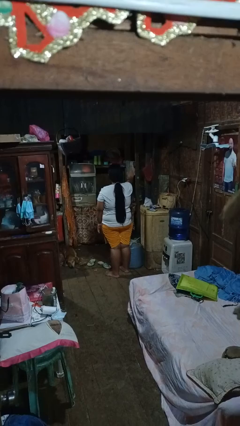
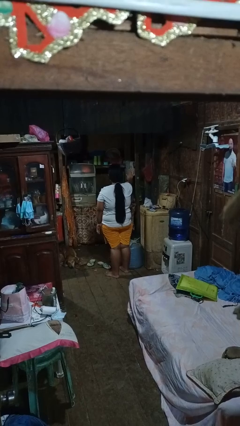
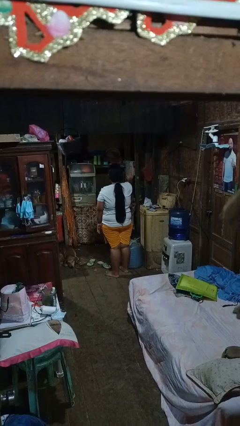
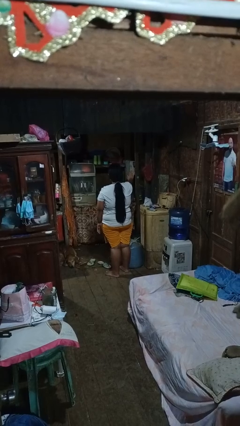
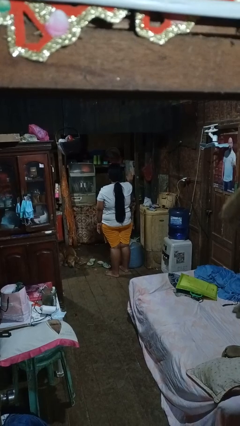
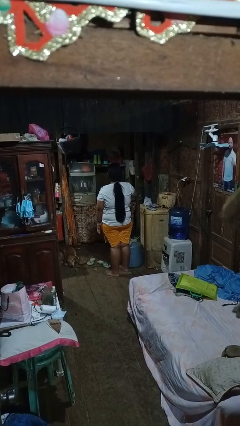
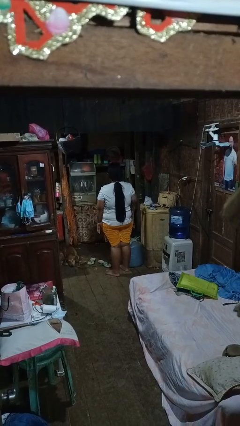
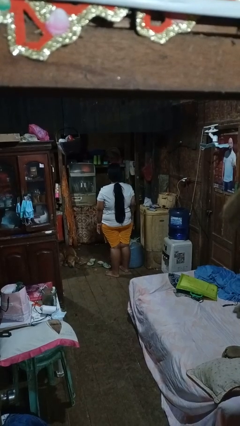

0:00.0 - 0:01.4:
person gestures stop

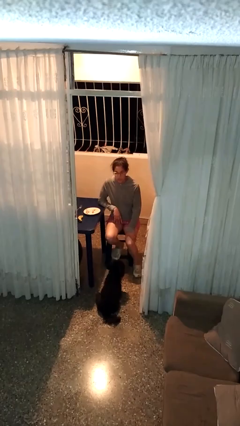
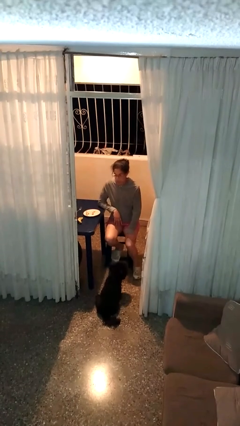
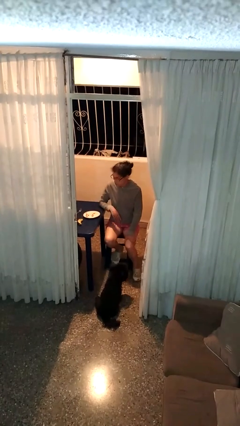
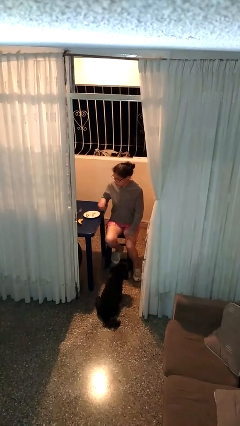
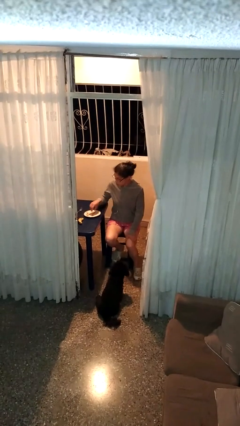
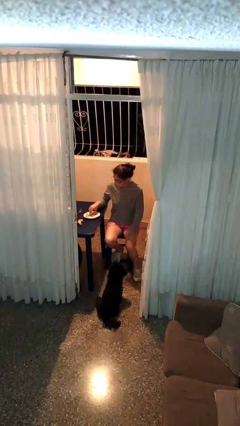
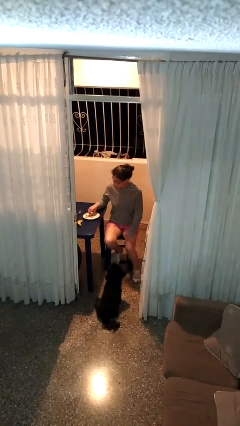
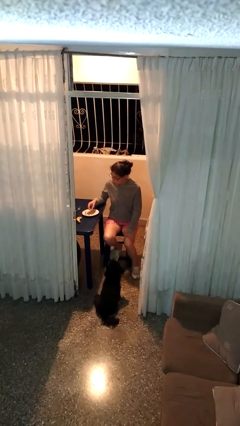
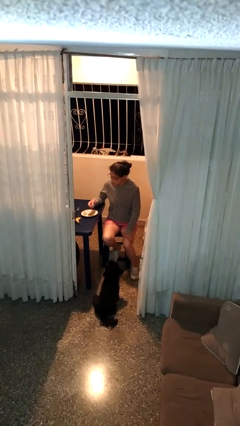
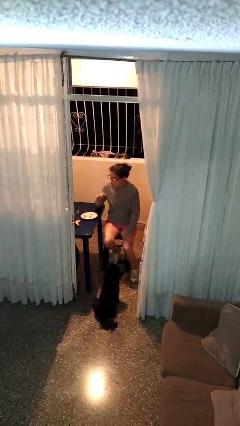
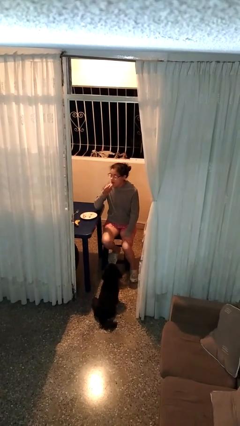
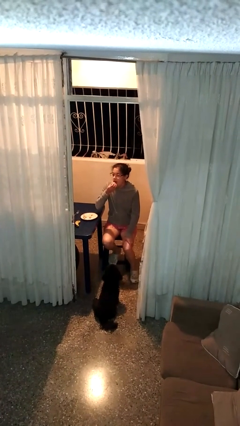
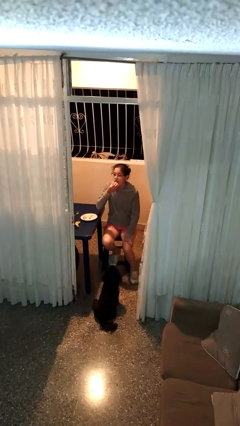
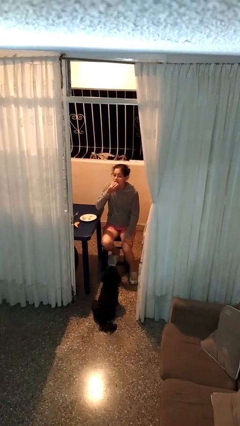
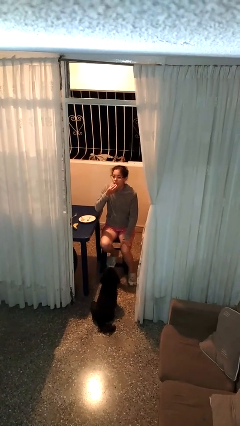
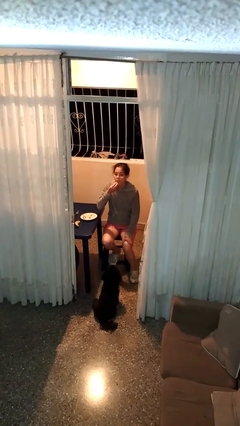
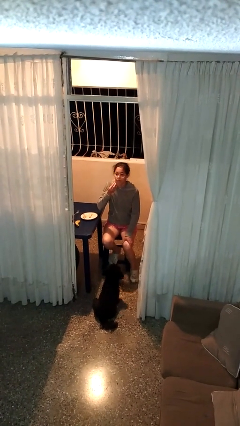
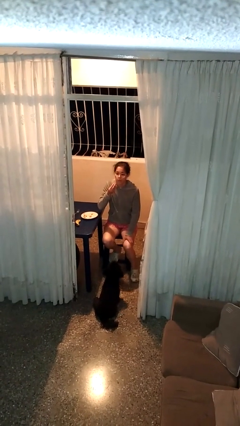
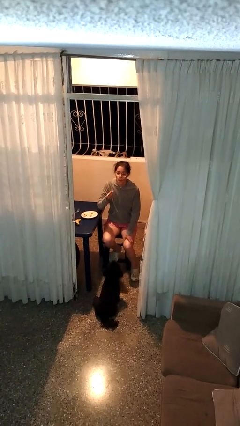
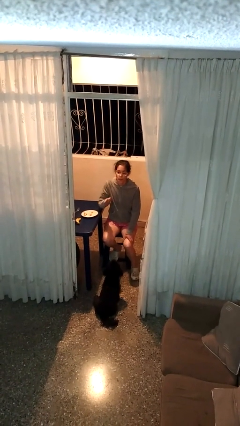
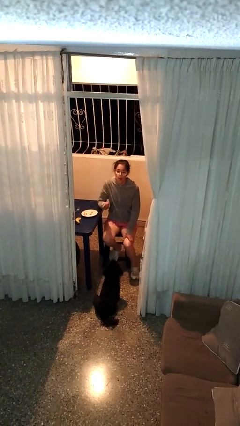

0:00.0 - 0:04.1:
person eats with hands

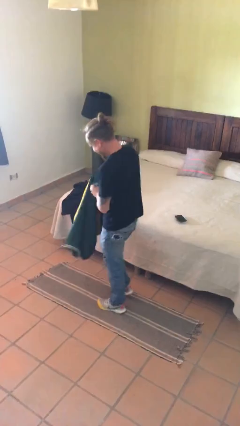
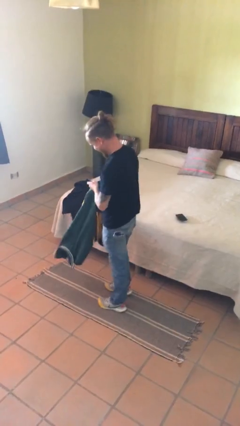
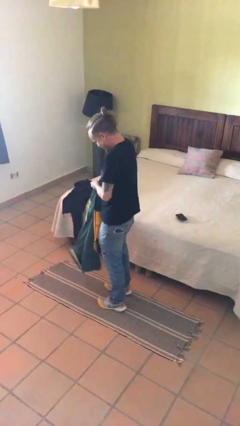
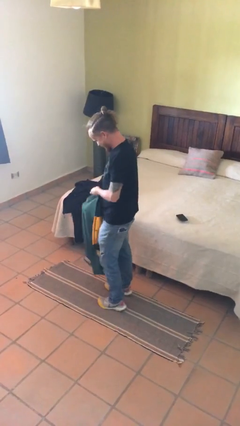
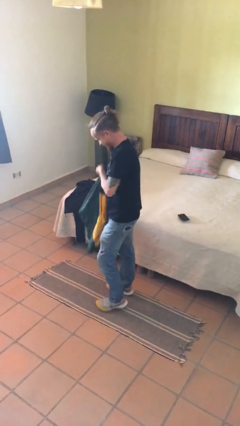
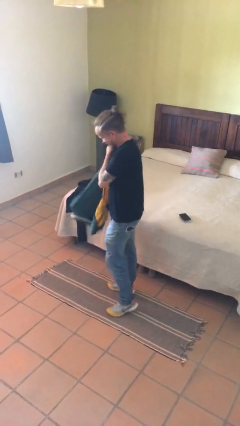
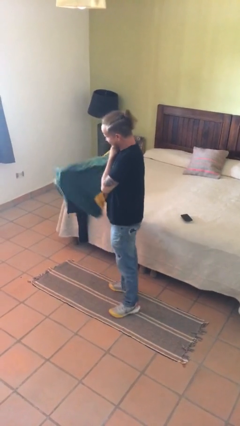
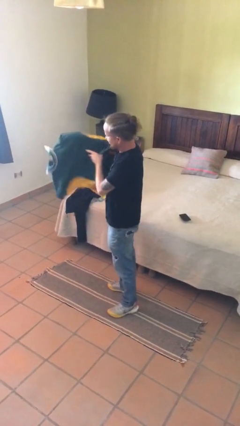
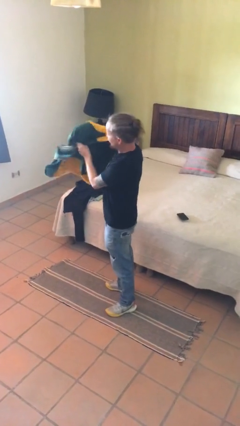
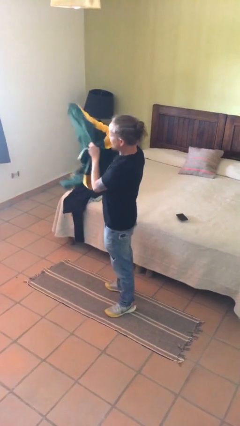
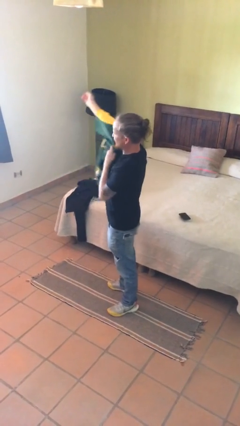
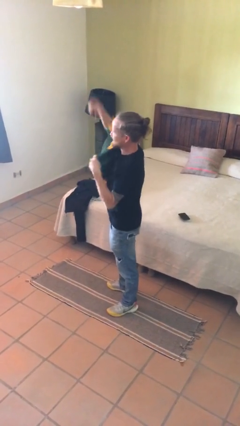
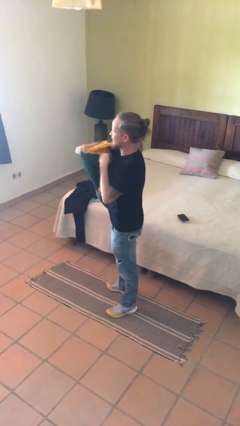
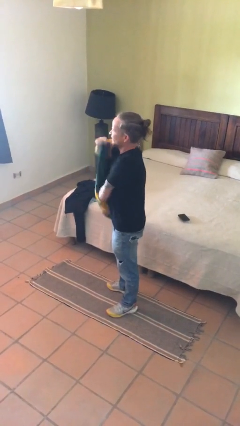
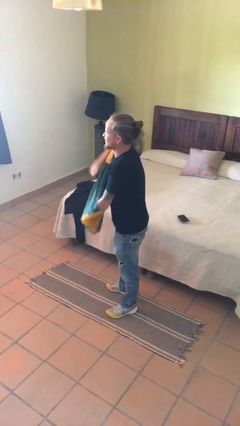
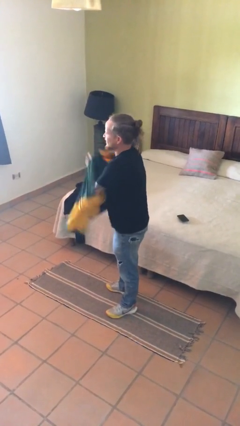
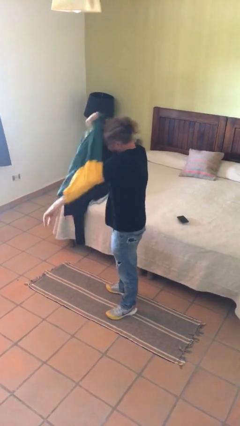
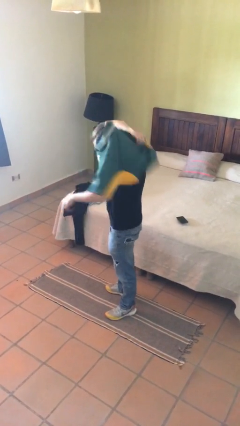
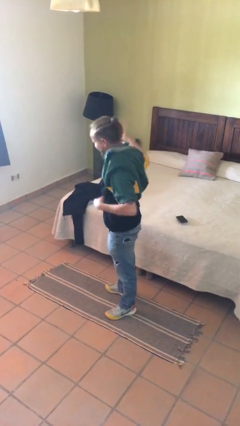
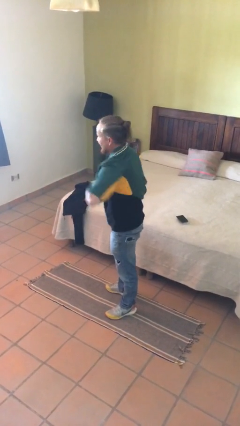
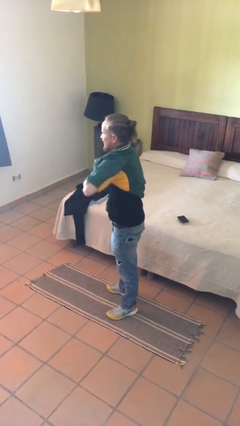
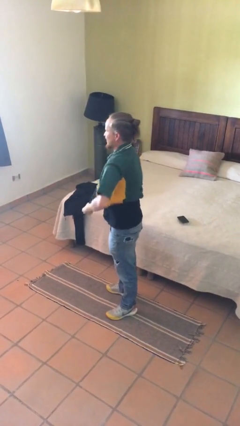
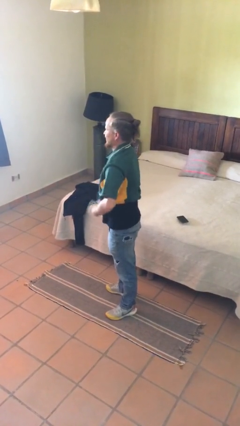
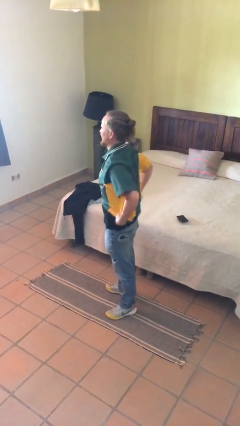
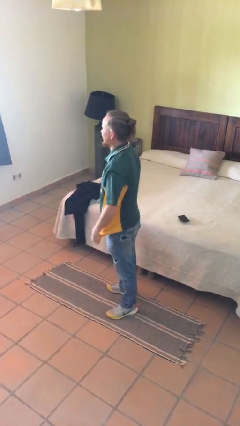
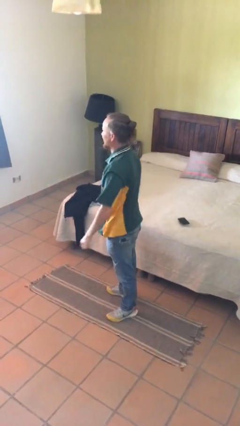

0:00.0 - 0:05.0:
person puts on shirt

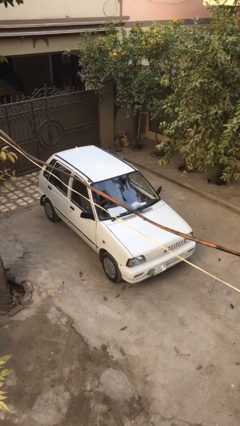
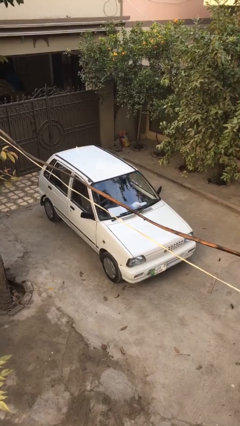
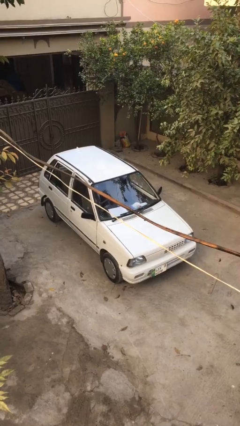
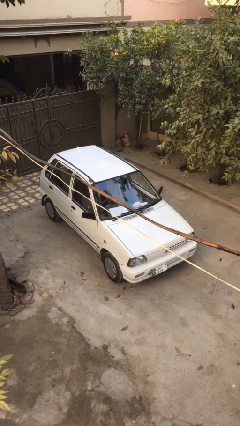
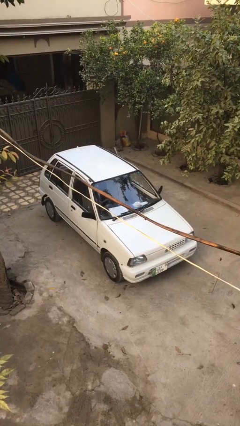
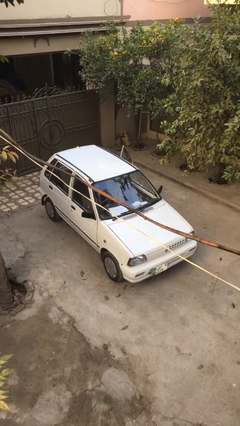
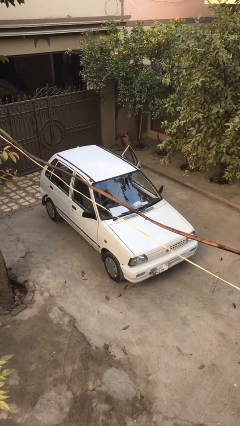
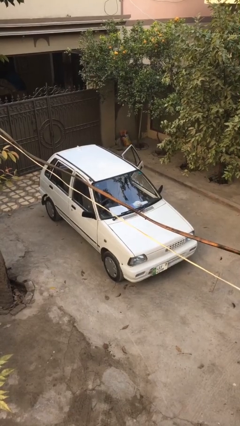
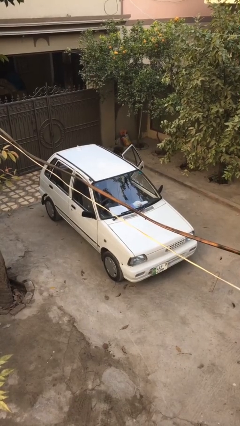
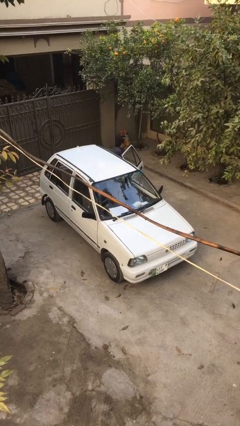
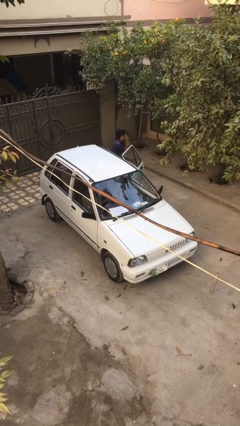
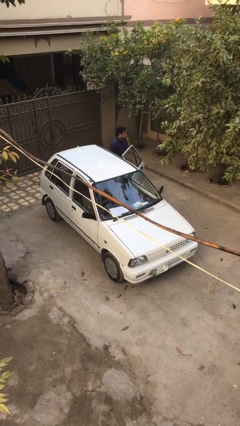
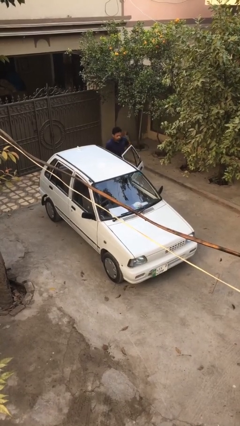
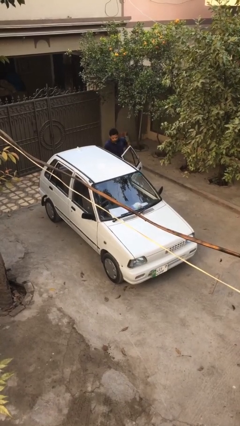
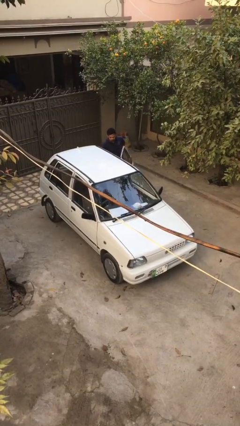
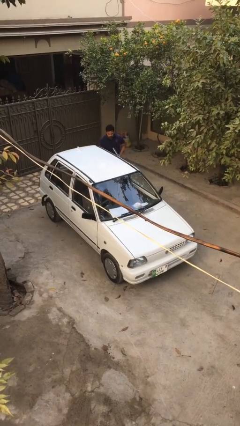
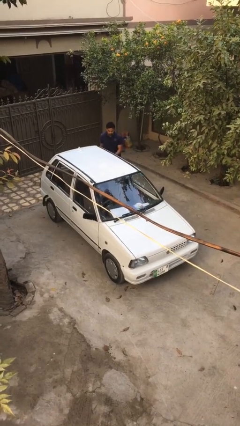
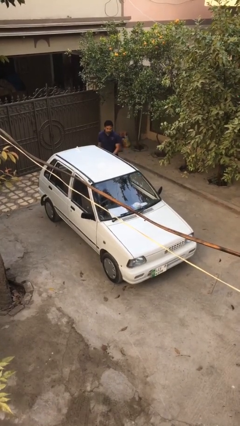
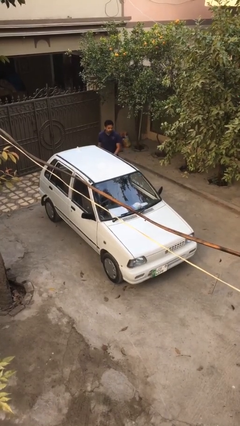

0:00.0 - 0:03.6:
car drops off person

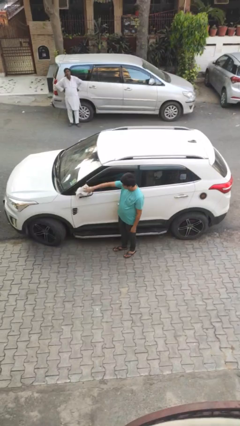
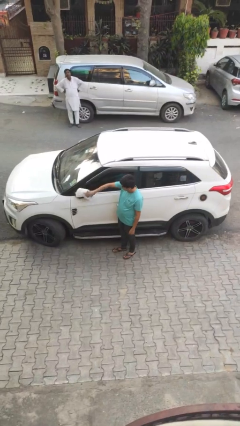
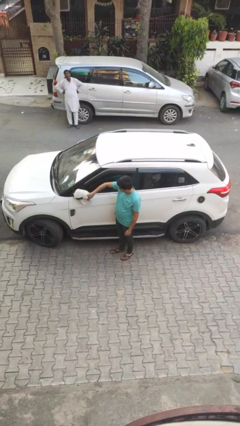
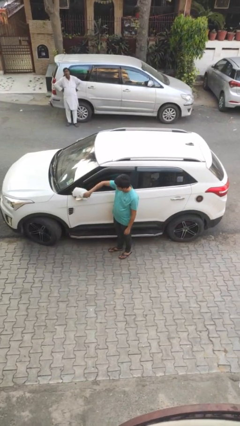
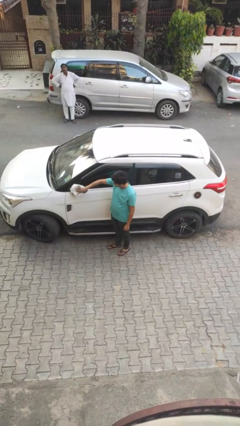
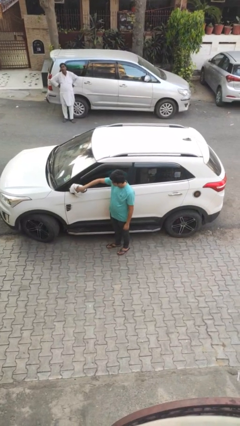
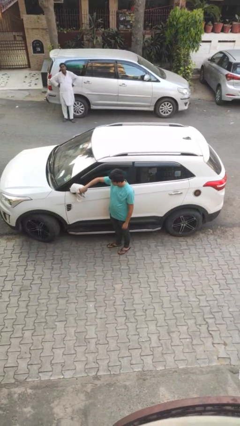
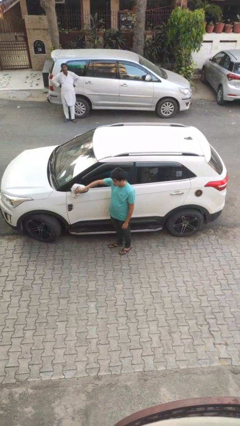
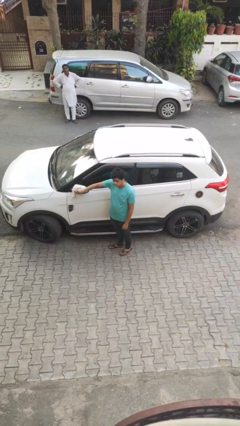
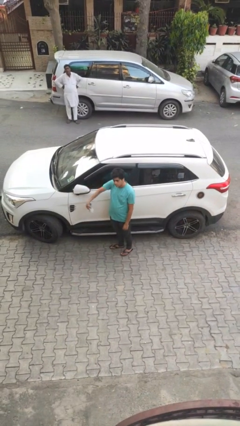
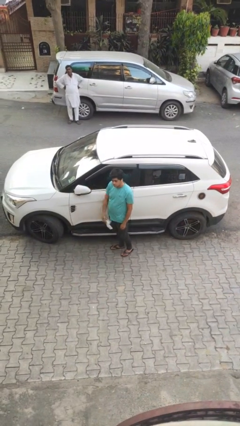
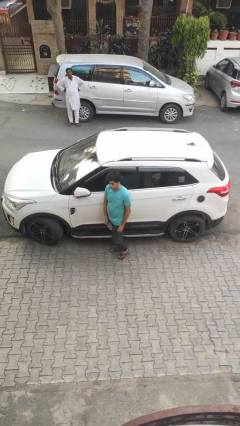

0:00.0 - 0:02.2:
person polishes car with rag

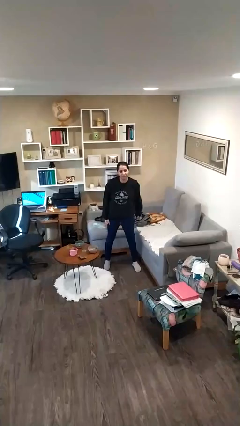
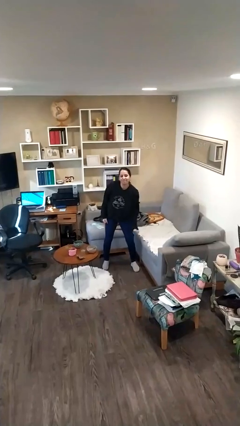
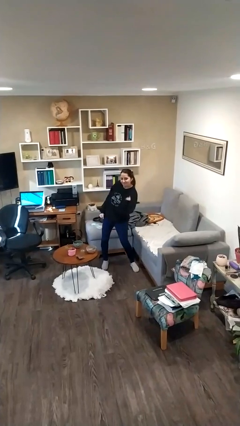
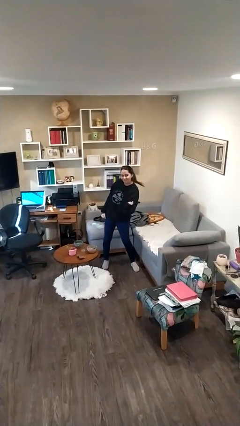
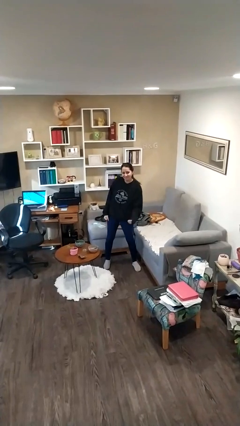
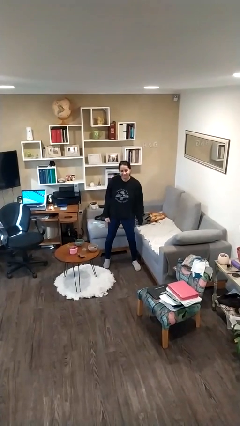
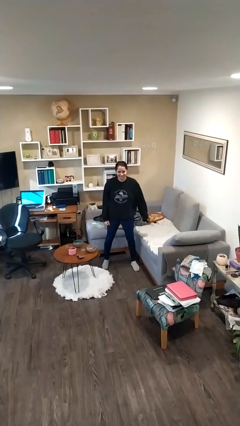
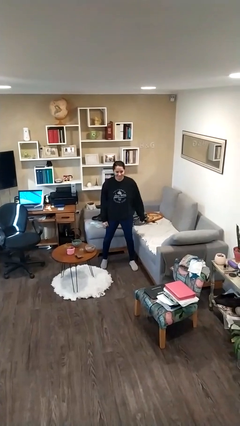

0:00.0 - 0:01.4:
person punches
